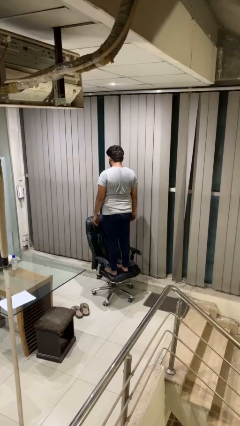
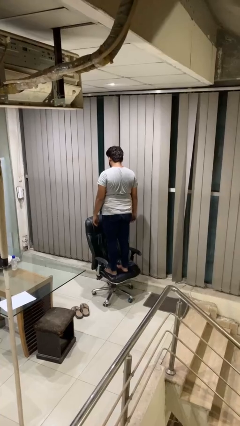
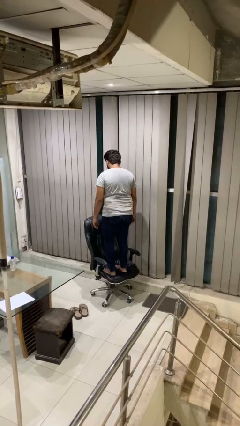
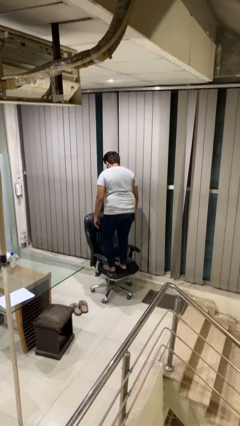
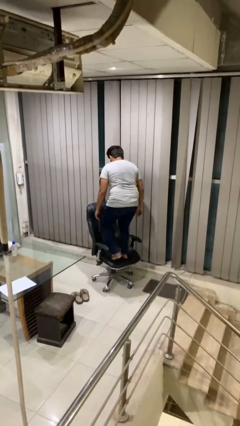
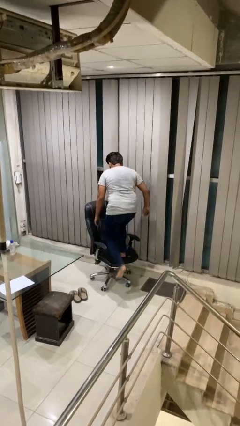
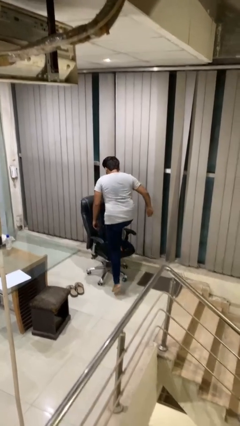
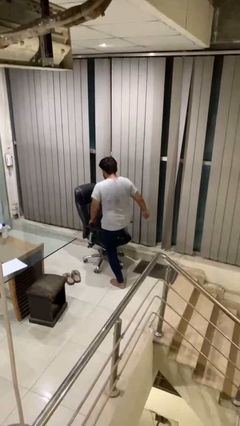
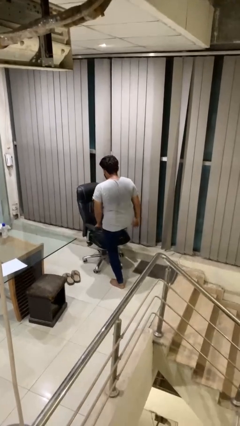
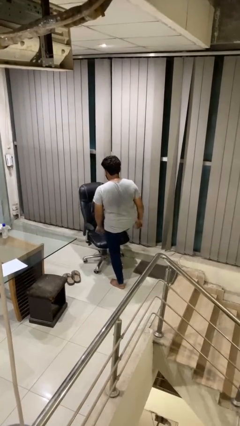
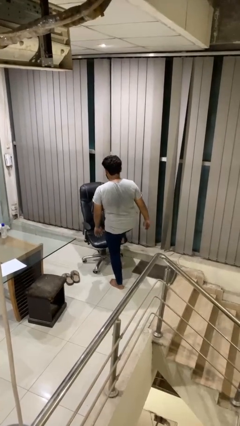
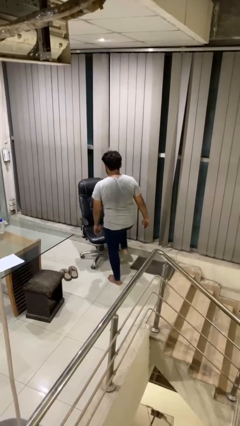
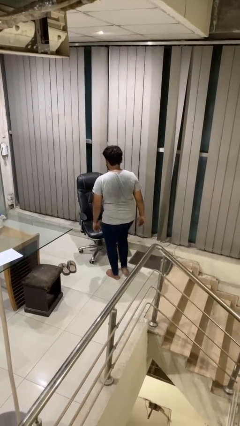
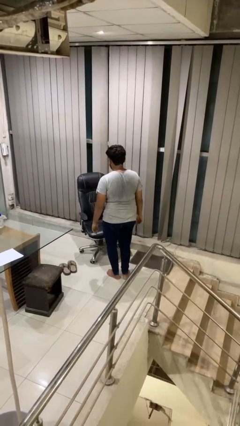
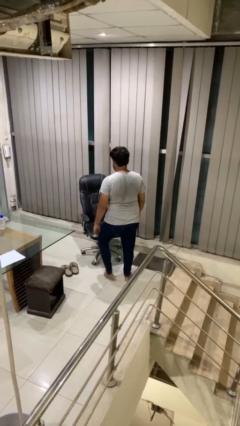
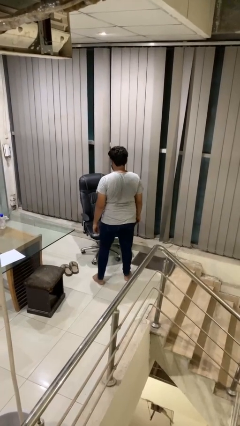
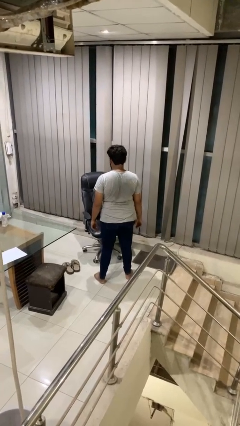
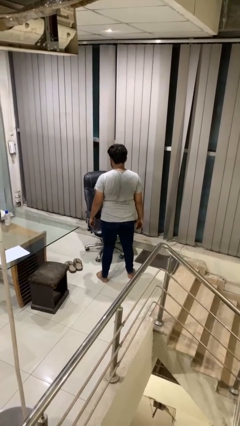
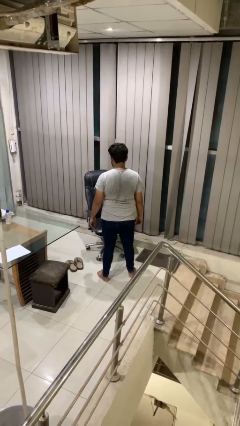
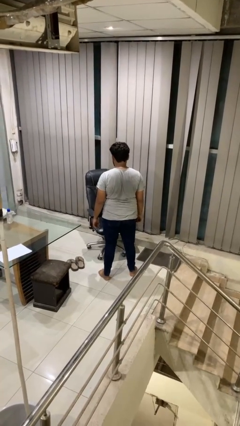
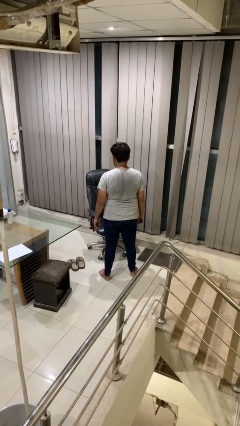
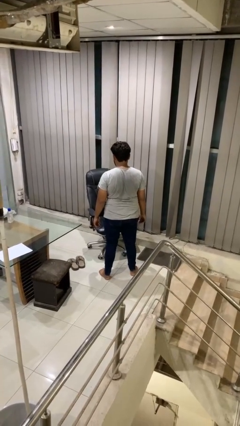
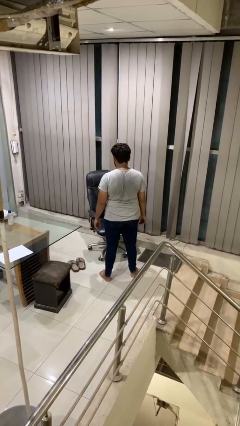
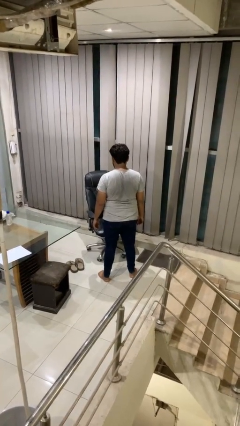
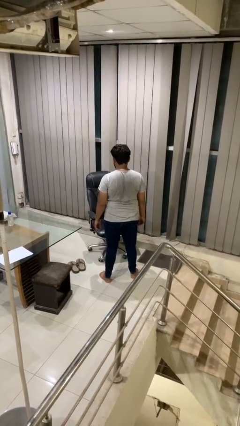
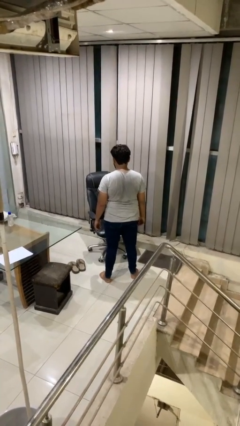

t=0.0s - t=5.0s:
person climbs off chair

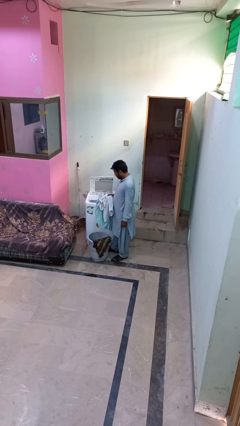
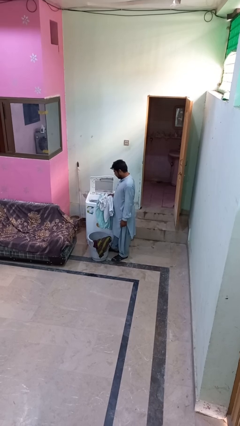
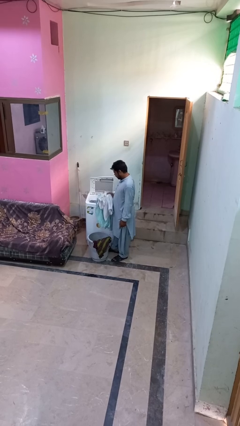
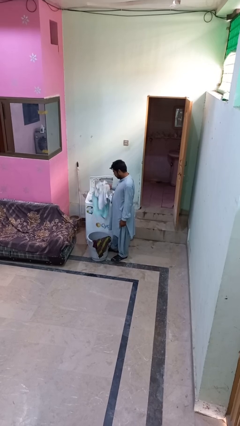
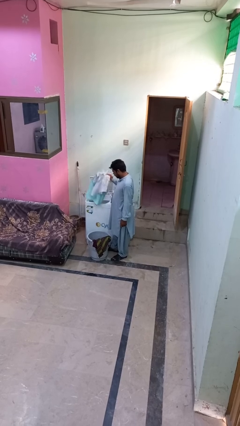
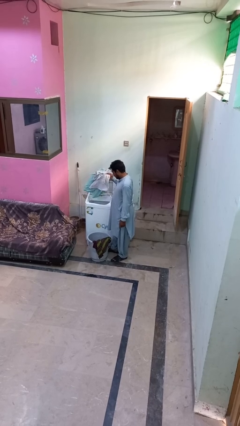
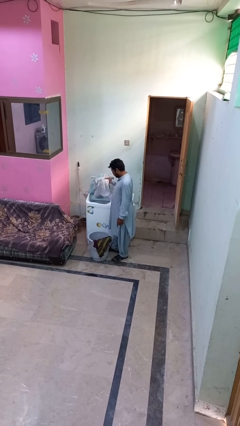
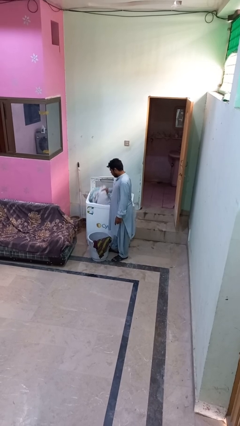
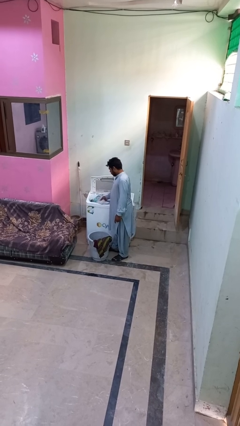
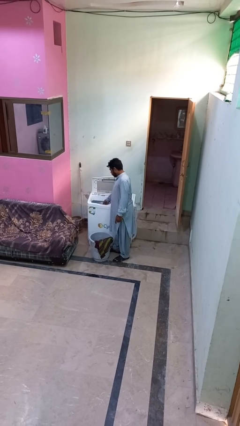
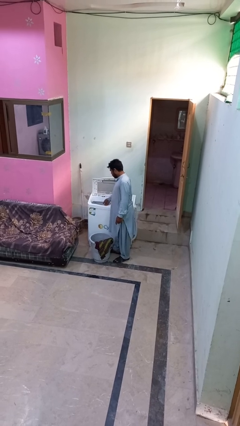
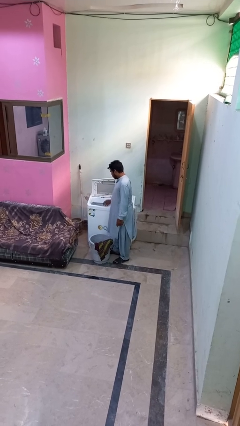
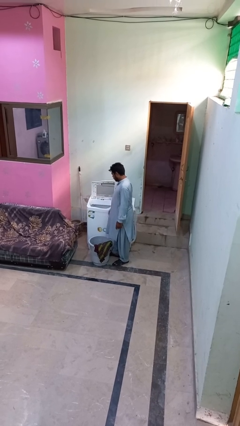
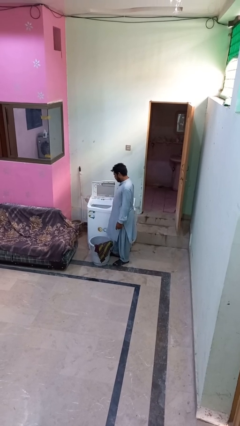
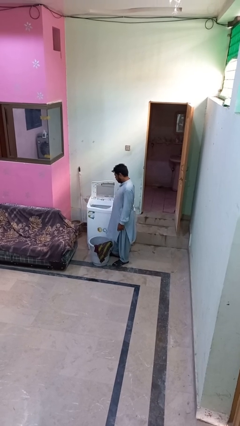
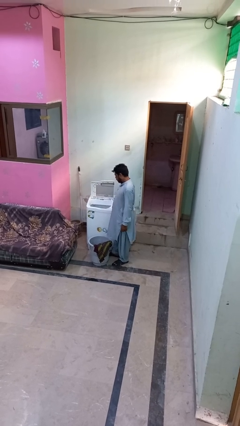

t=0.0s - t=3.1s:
person loads clotheswasher

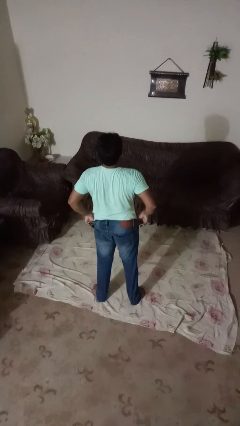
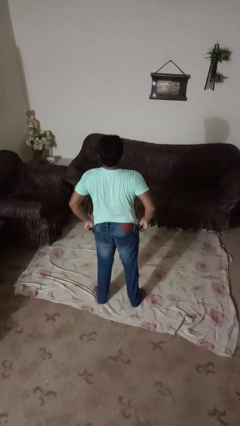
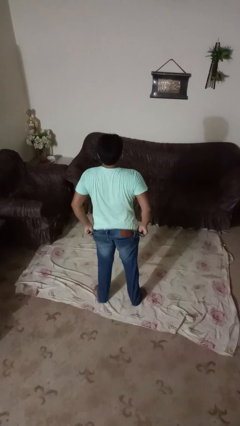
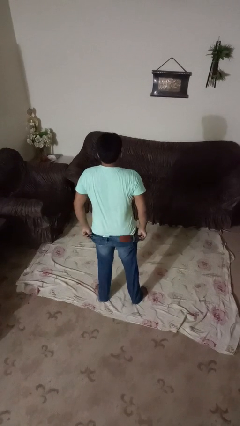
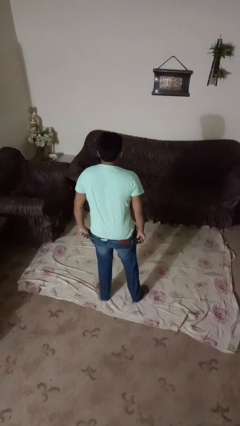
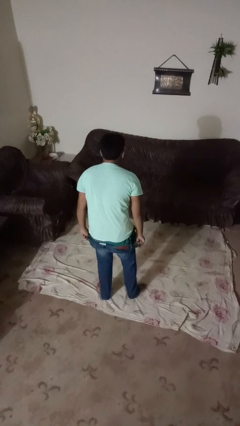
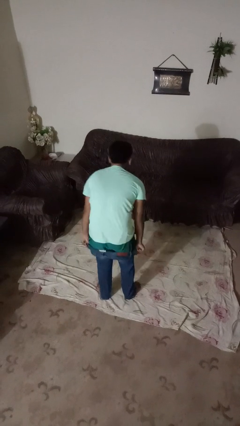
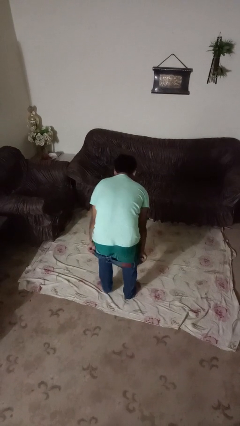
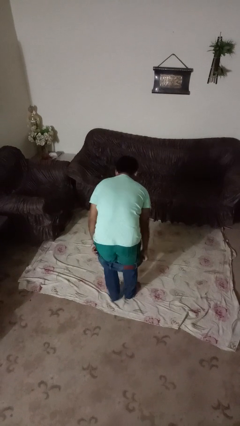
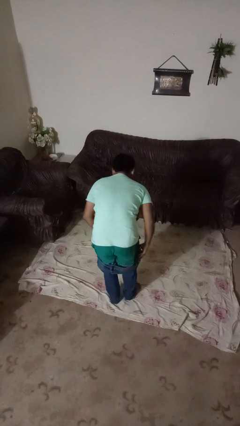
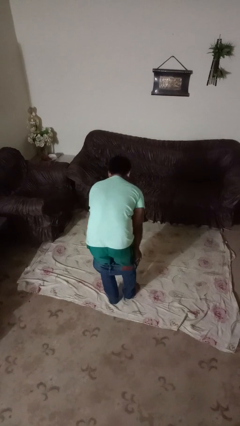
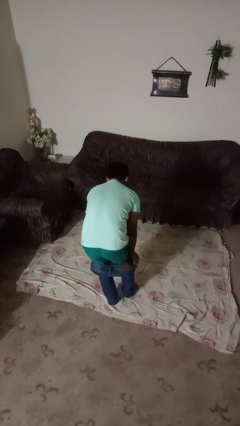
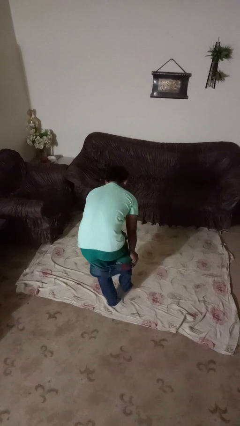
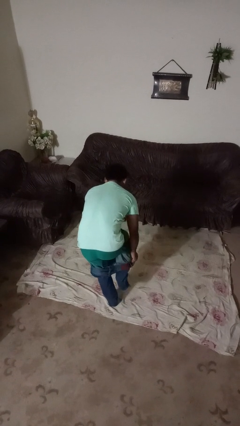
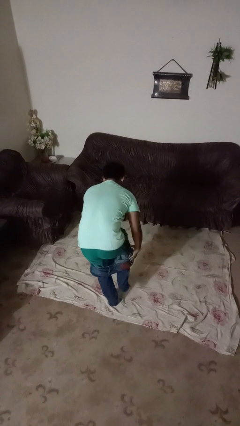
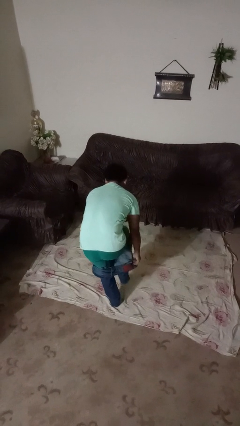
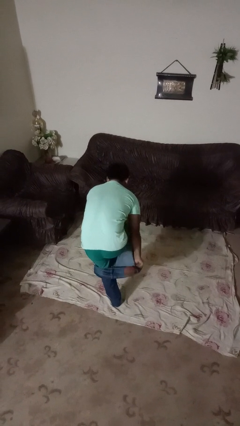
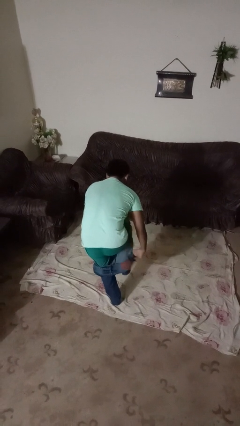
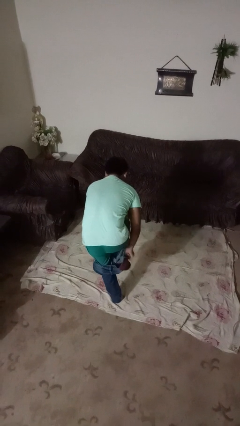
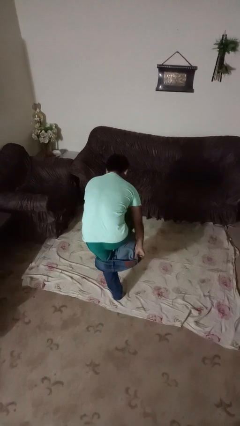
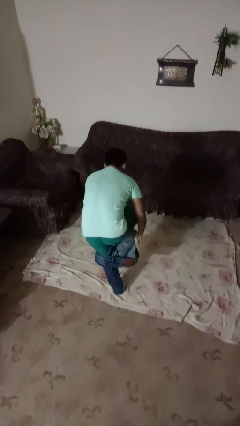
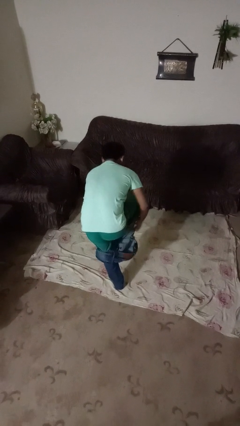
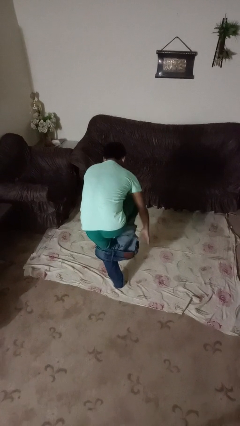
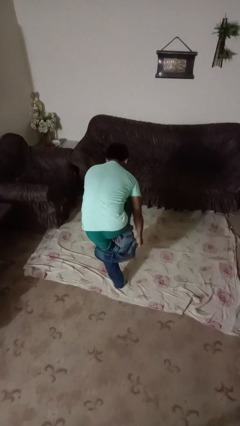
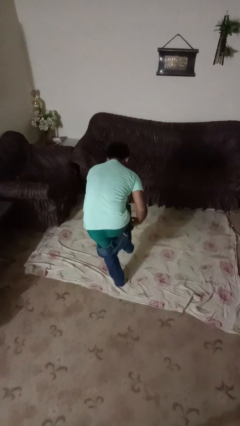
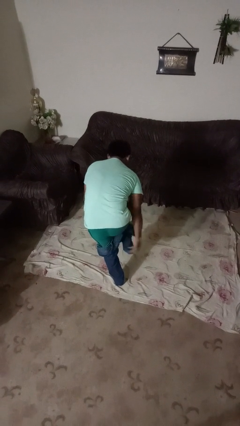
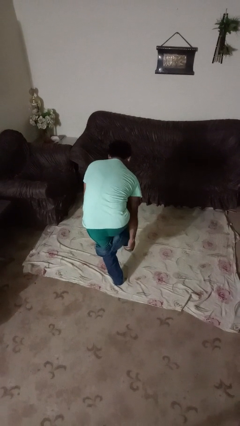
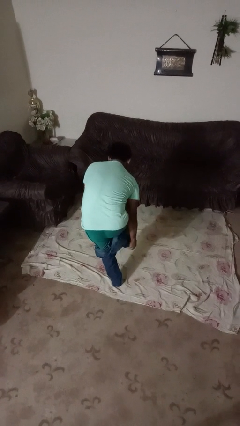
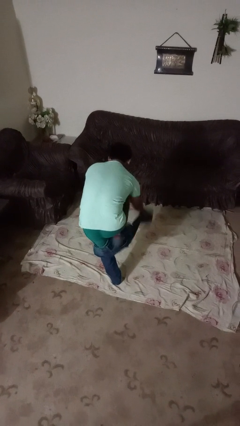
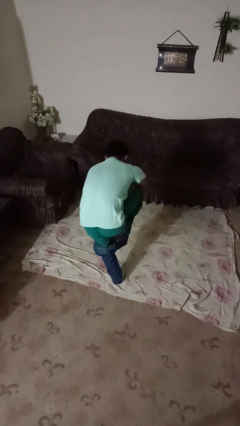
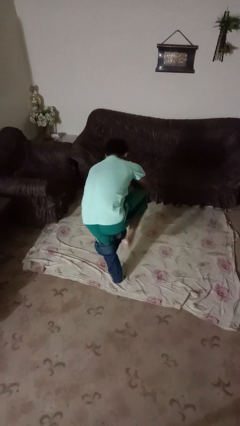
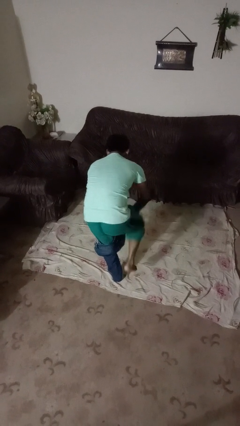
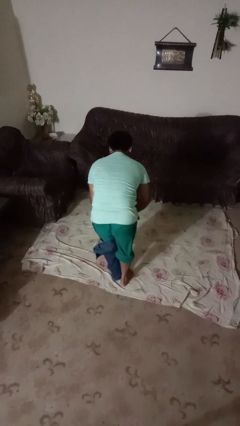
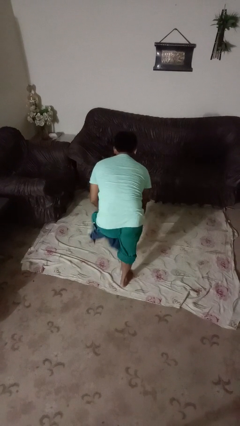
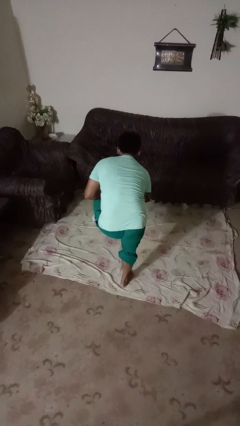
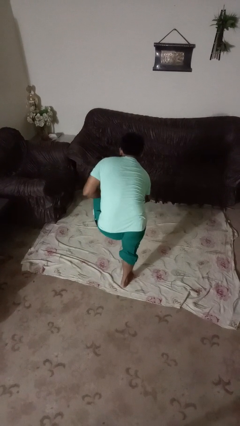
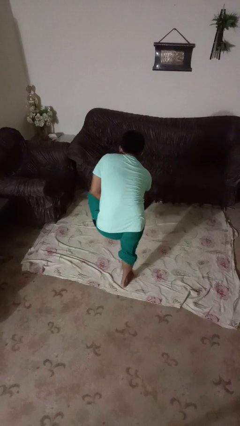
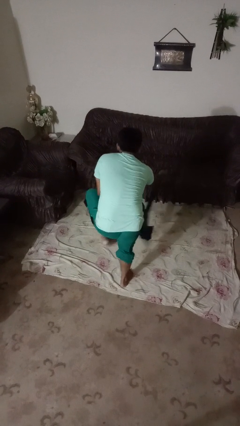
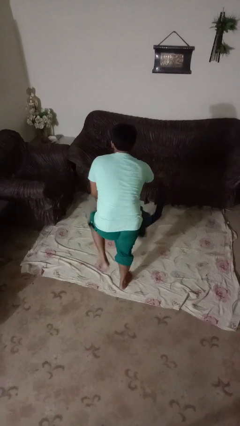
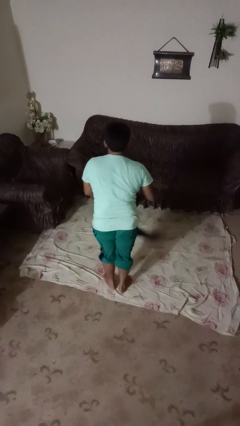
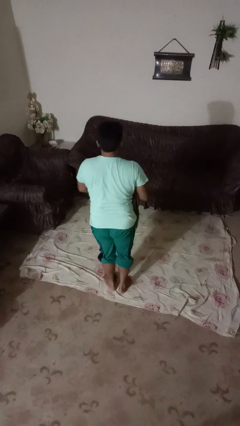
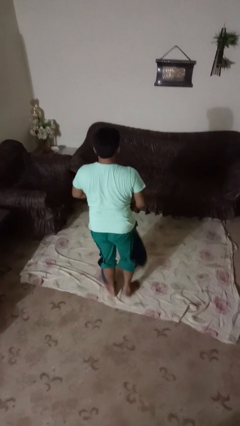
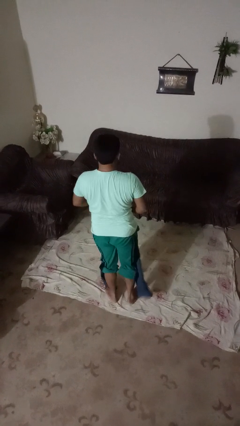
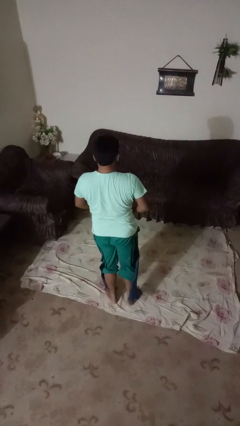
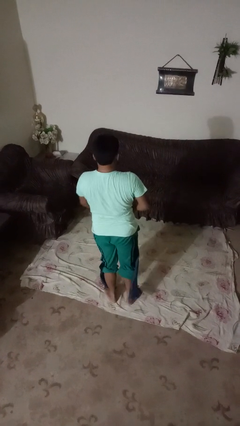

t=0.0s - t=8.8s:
person takes off pants
